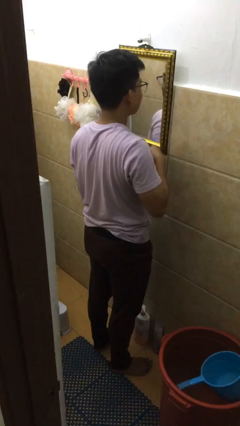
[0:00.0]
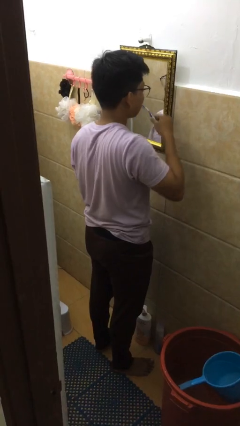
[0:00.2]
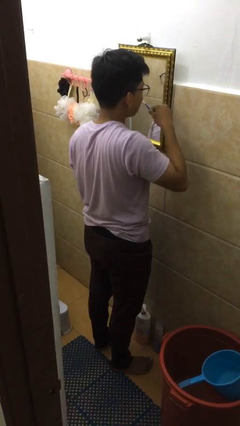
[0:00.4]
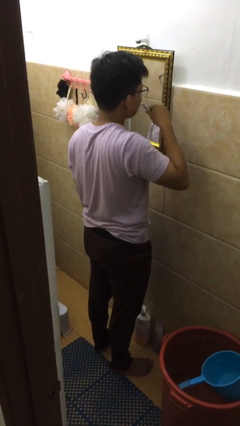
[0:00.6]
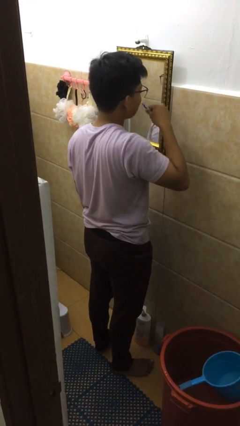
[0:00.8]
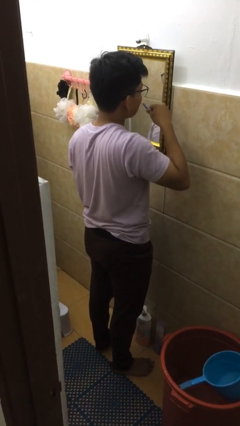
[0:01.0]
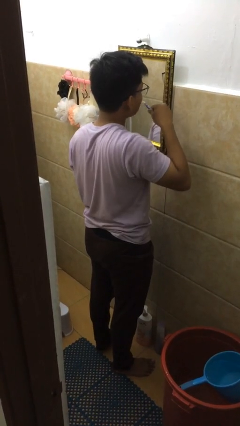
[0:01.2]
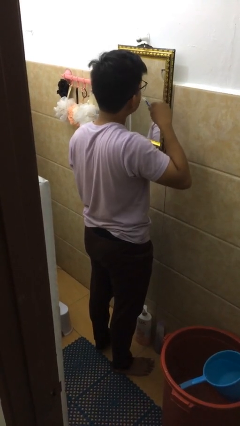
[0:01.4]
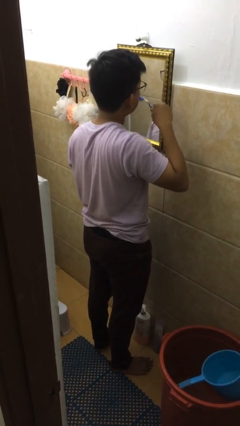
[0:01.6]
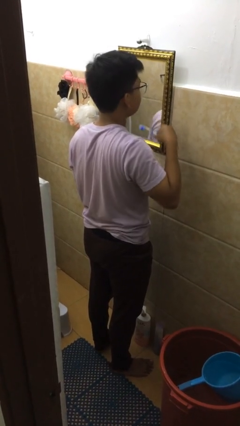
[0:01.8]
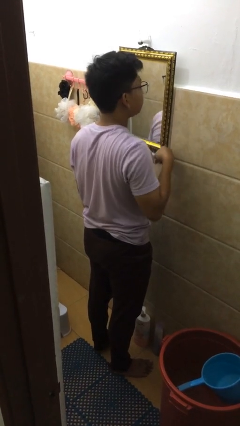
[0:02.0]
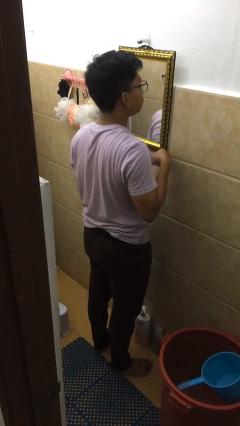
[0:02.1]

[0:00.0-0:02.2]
person brushes teeth

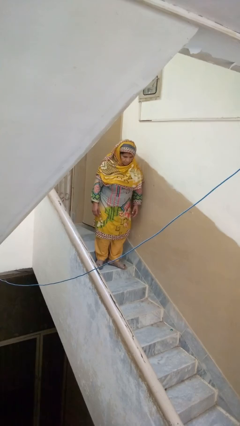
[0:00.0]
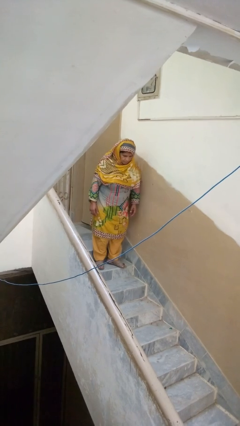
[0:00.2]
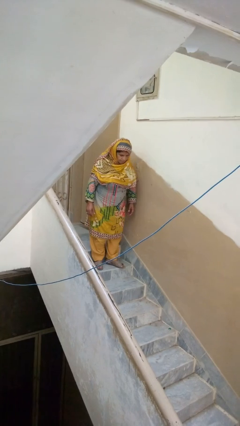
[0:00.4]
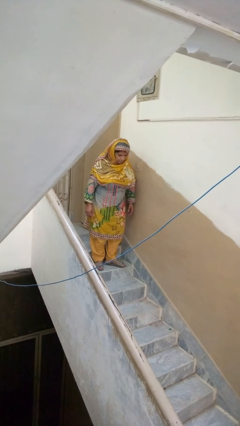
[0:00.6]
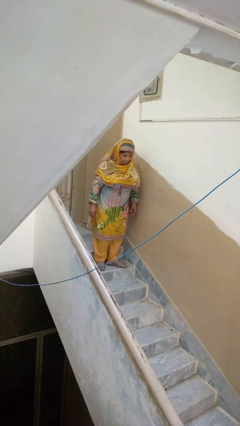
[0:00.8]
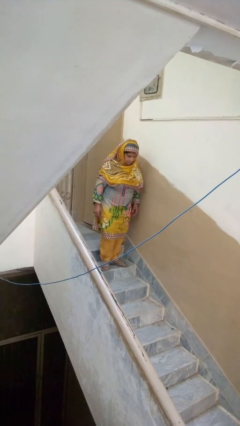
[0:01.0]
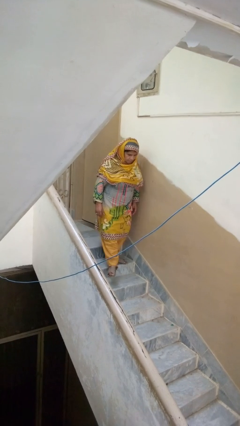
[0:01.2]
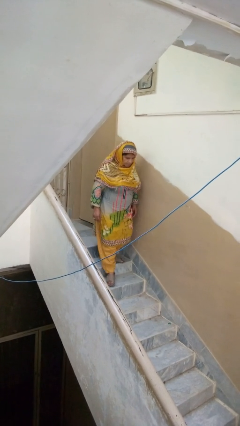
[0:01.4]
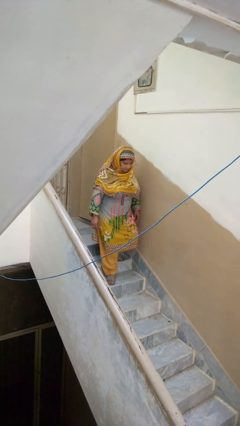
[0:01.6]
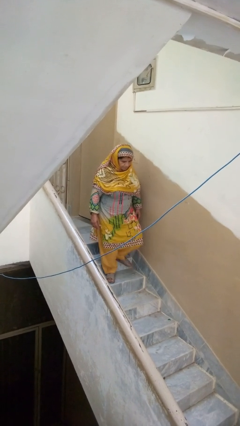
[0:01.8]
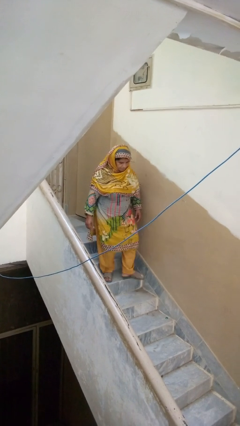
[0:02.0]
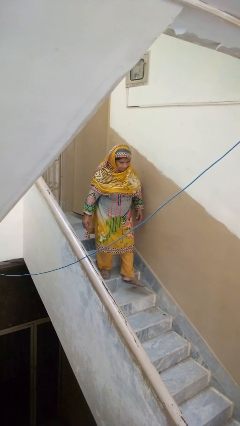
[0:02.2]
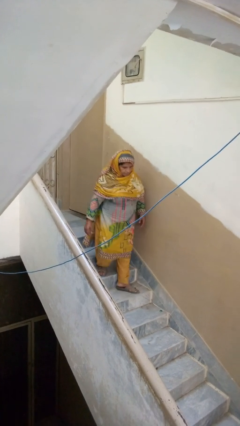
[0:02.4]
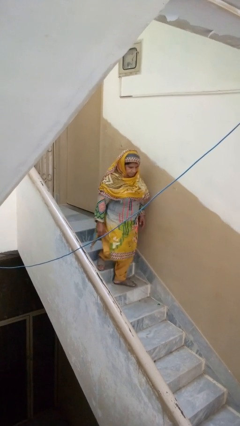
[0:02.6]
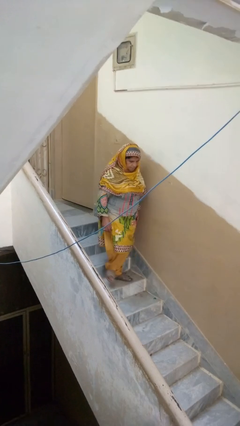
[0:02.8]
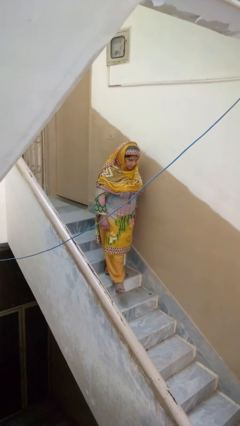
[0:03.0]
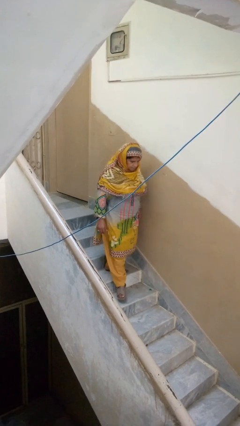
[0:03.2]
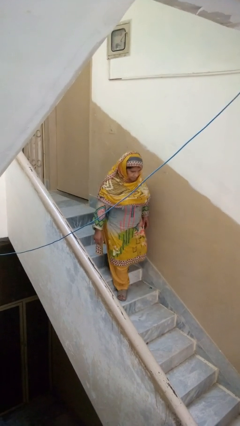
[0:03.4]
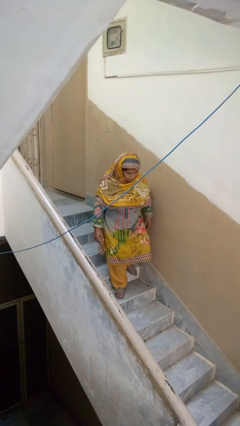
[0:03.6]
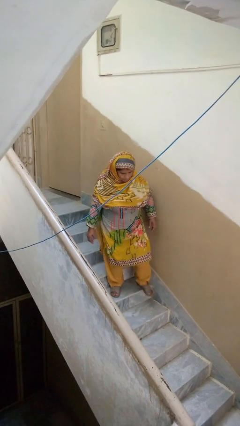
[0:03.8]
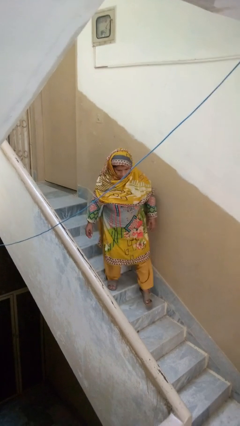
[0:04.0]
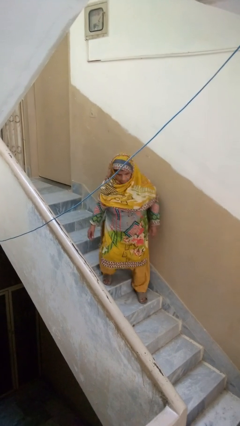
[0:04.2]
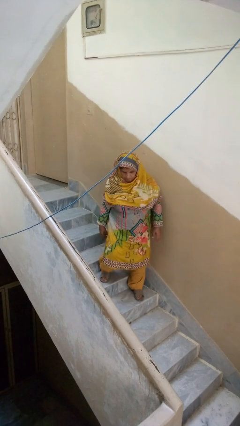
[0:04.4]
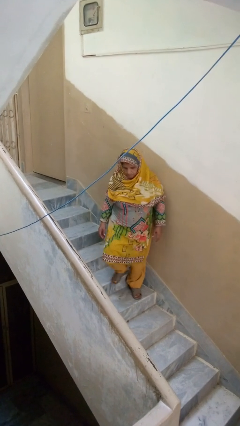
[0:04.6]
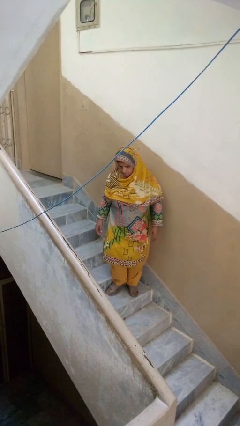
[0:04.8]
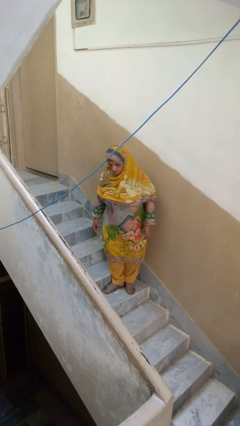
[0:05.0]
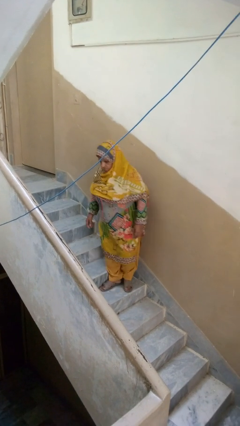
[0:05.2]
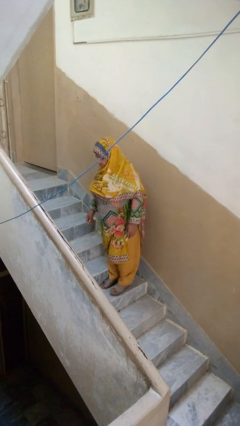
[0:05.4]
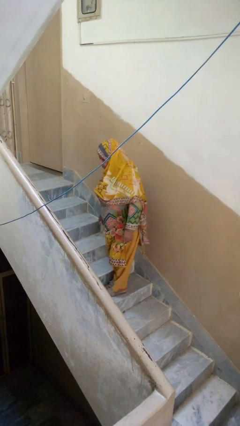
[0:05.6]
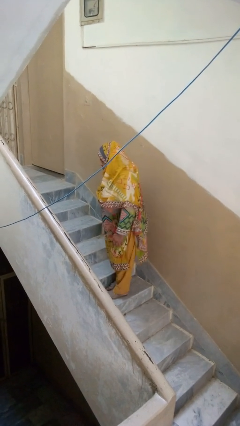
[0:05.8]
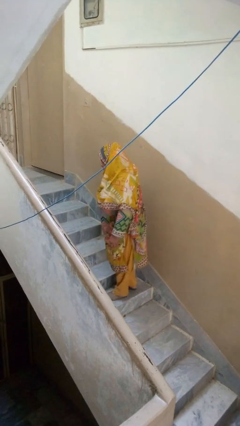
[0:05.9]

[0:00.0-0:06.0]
person climbs down stairs

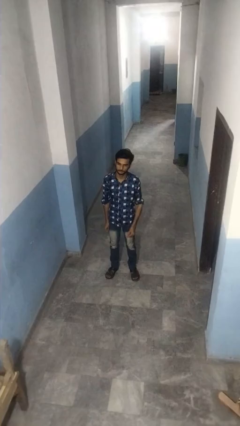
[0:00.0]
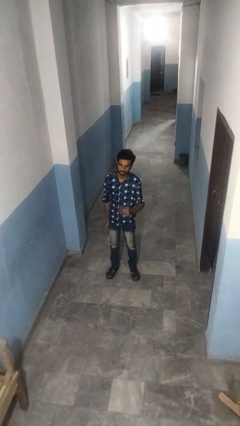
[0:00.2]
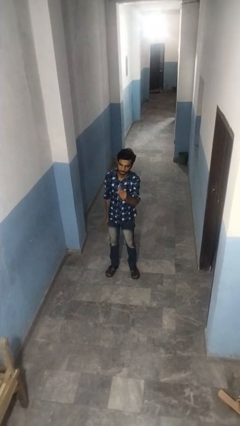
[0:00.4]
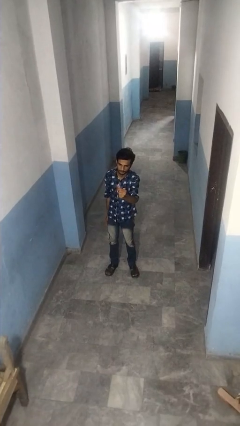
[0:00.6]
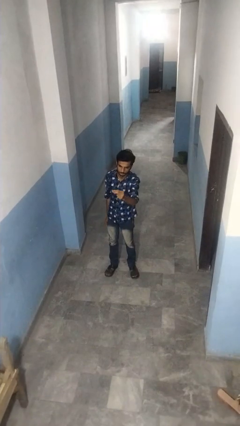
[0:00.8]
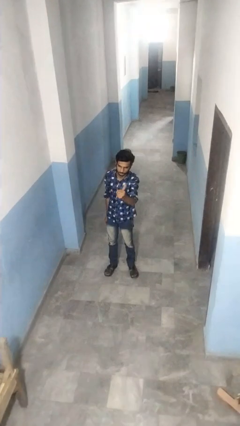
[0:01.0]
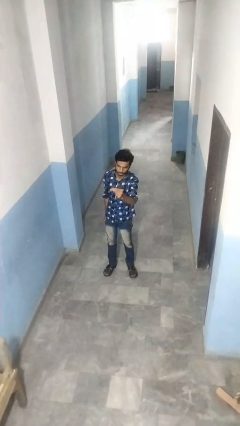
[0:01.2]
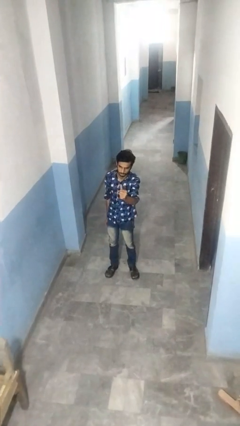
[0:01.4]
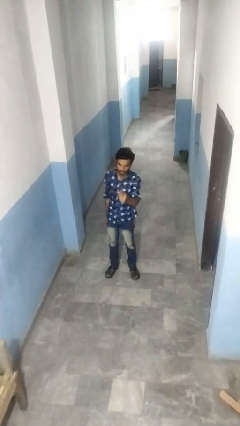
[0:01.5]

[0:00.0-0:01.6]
person snaps fingers

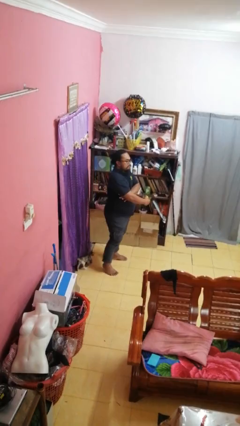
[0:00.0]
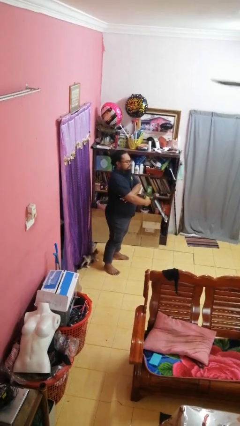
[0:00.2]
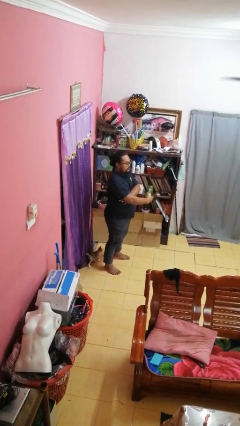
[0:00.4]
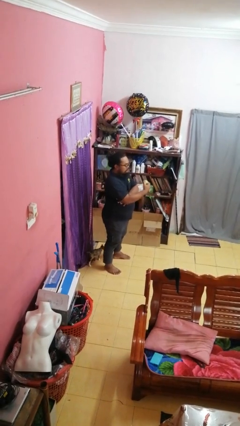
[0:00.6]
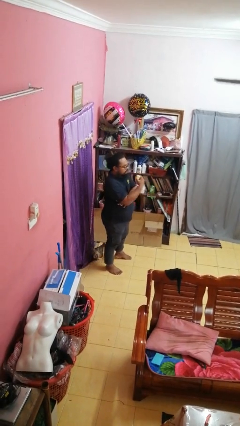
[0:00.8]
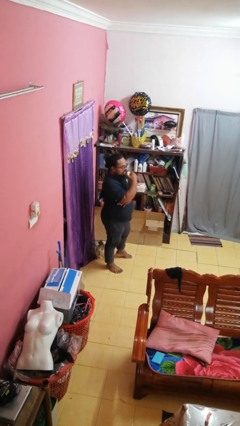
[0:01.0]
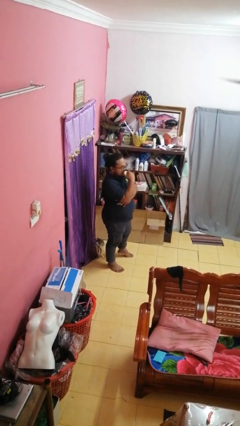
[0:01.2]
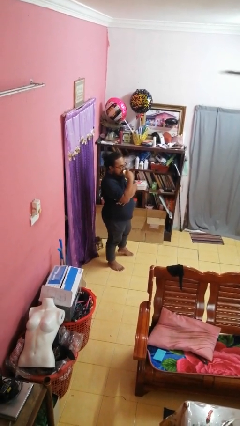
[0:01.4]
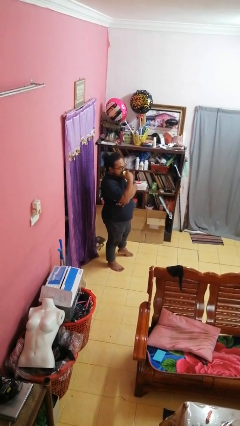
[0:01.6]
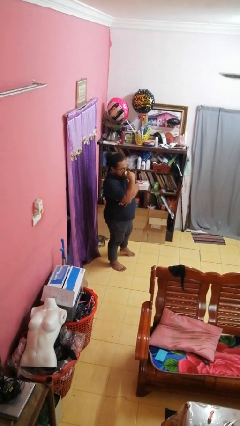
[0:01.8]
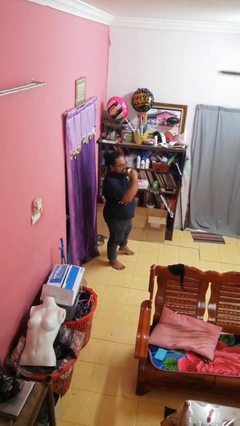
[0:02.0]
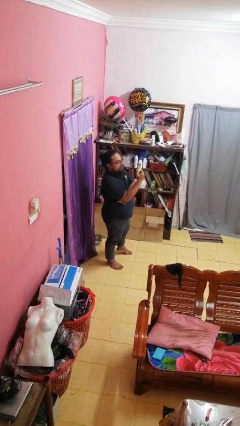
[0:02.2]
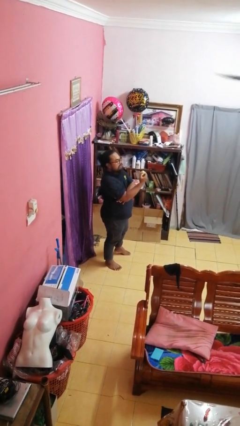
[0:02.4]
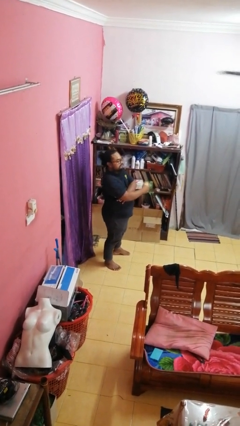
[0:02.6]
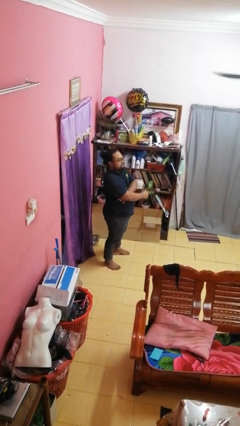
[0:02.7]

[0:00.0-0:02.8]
person eats apple

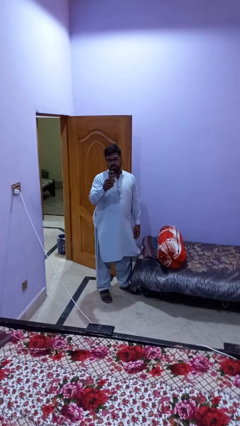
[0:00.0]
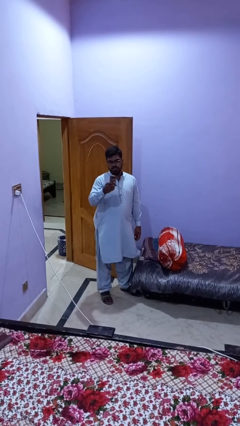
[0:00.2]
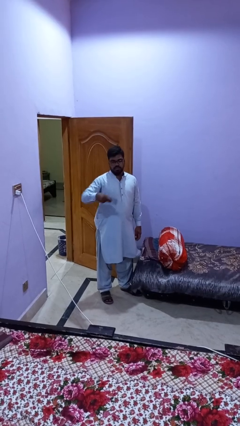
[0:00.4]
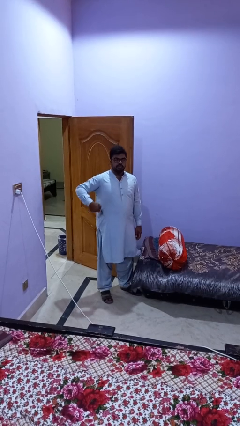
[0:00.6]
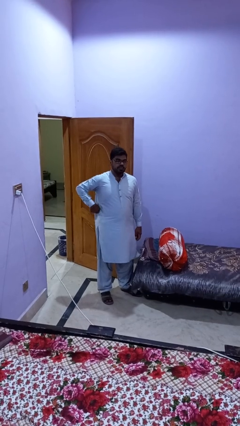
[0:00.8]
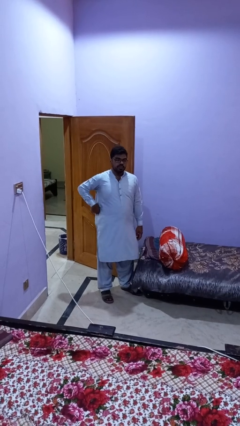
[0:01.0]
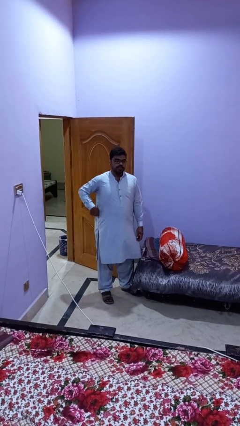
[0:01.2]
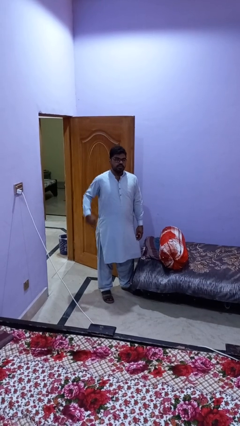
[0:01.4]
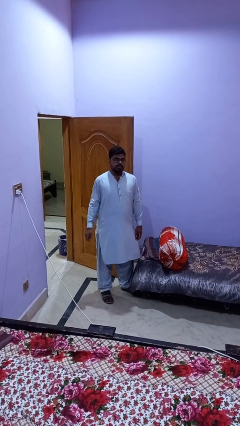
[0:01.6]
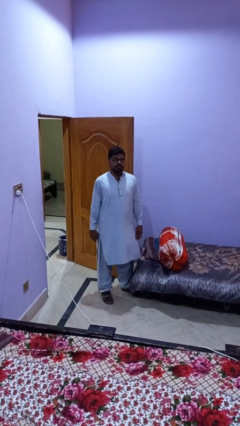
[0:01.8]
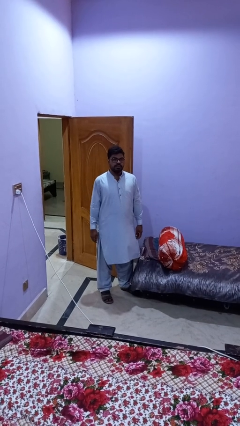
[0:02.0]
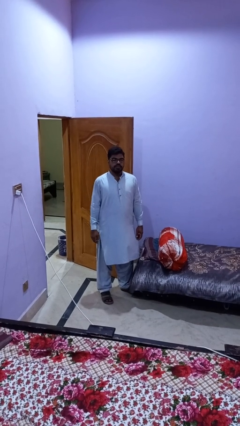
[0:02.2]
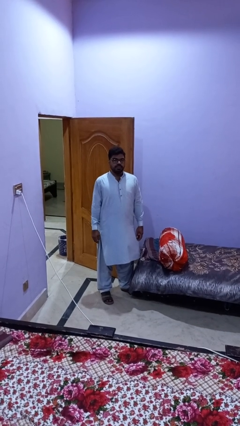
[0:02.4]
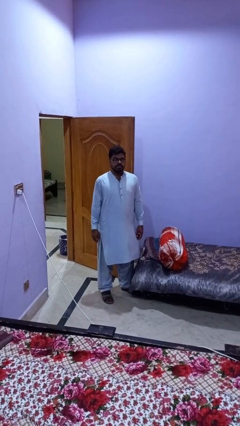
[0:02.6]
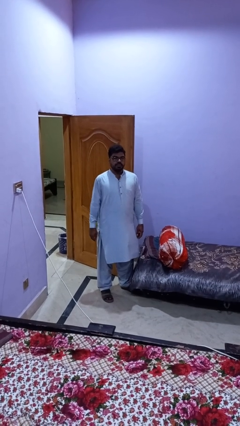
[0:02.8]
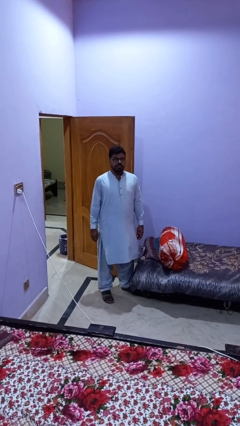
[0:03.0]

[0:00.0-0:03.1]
person puts phone into pocket

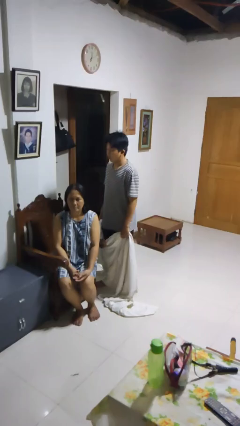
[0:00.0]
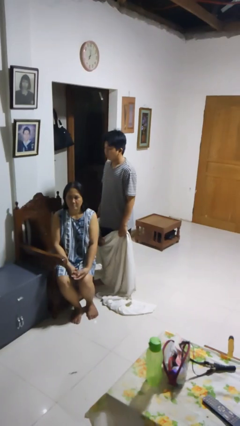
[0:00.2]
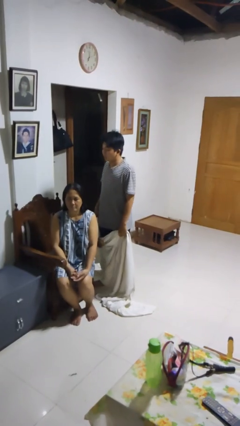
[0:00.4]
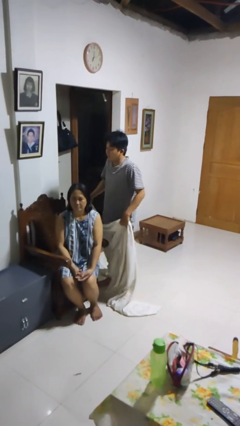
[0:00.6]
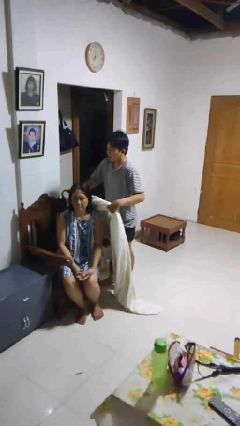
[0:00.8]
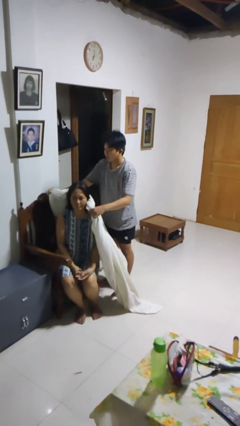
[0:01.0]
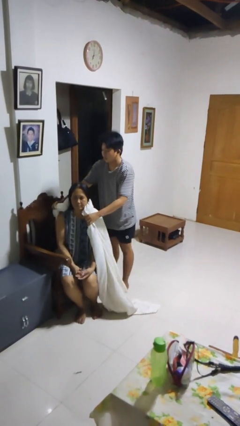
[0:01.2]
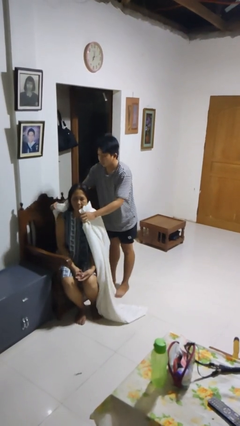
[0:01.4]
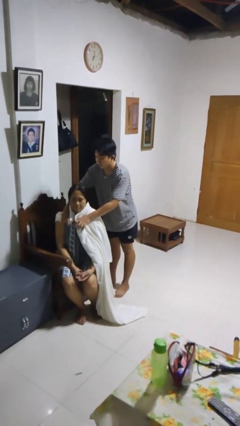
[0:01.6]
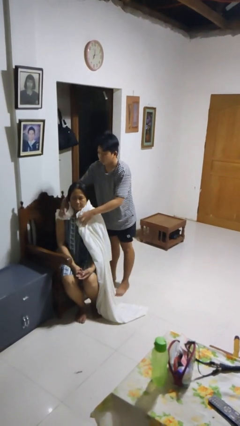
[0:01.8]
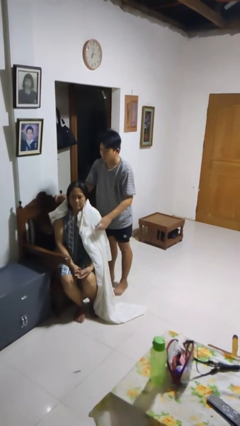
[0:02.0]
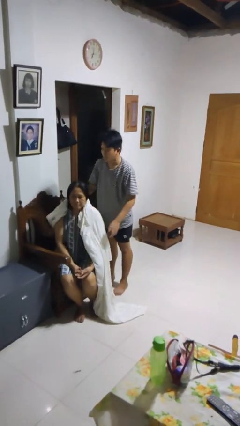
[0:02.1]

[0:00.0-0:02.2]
person covers friend with blanket
